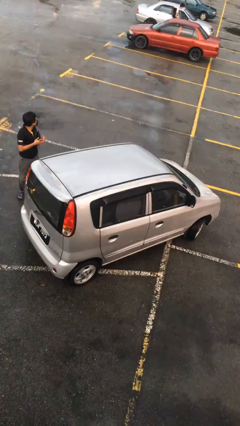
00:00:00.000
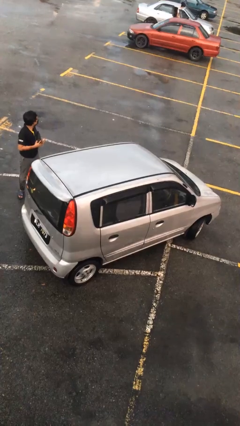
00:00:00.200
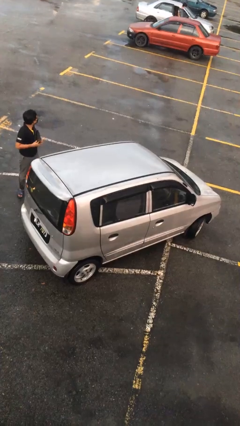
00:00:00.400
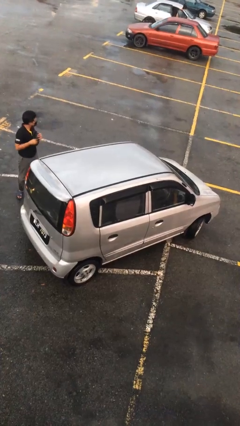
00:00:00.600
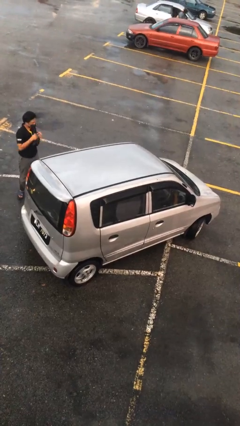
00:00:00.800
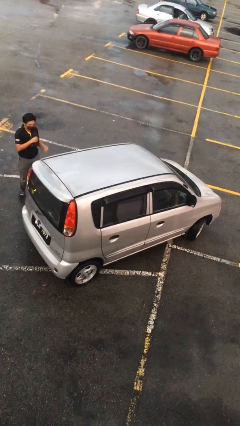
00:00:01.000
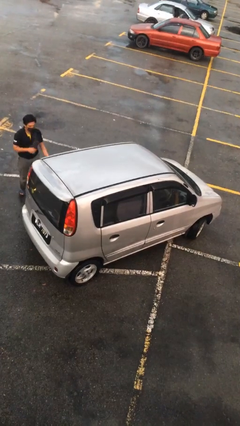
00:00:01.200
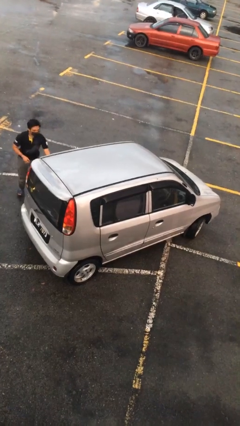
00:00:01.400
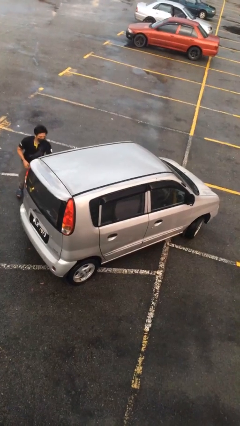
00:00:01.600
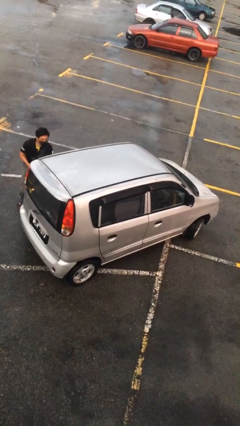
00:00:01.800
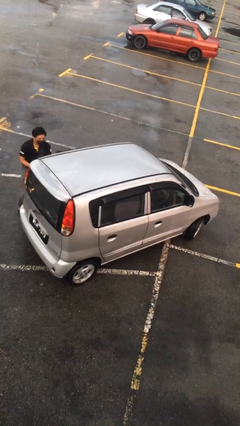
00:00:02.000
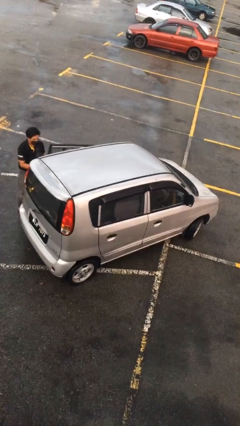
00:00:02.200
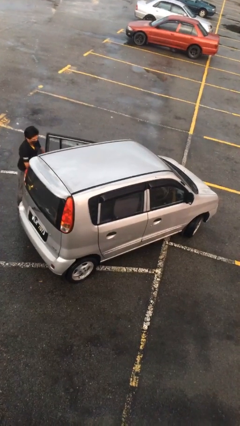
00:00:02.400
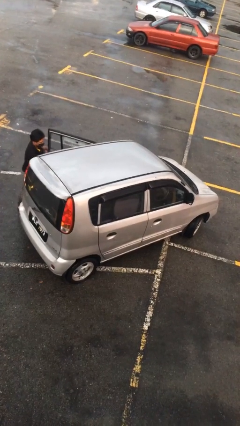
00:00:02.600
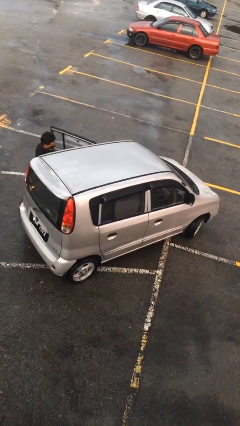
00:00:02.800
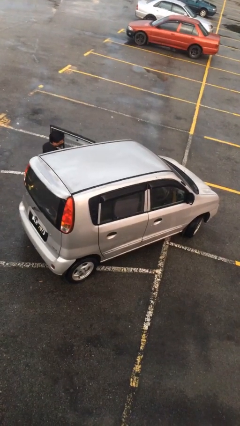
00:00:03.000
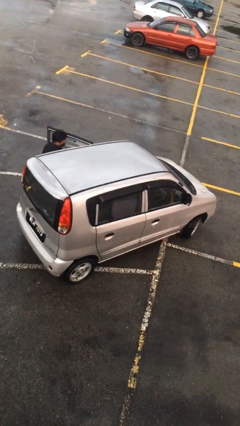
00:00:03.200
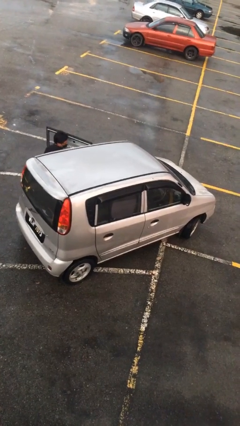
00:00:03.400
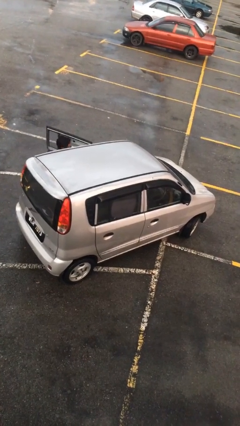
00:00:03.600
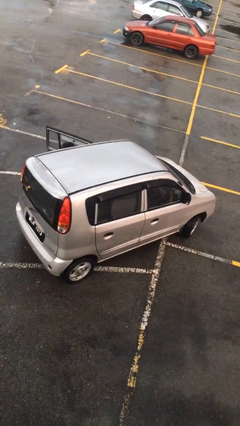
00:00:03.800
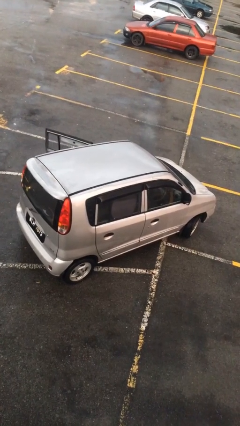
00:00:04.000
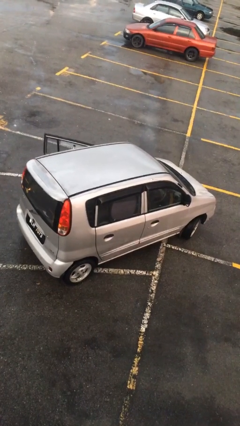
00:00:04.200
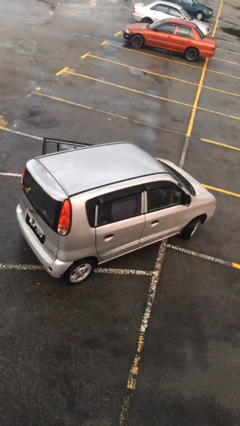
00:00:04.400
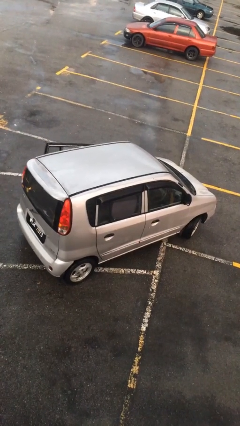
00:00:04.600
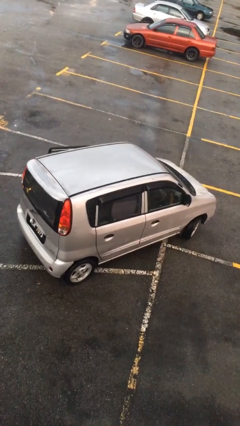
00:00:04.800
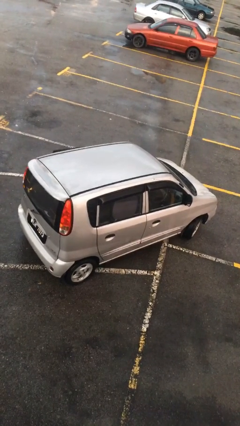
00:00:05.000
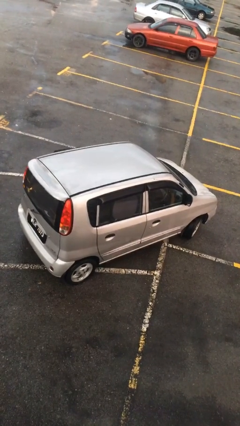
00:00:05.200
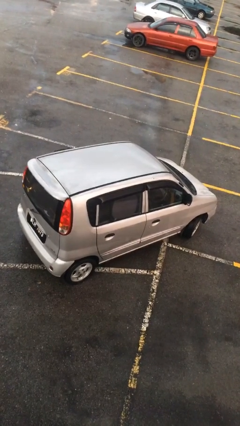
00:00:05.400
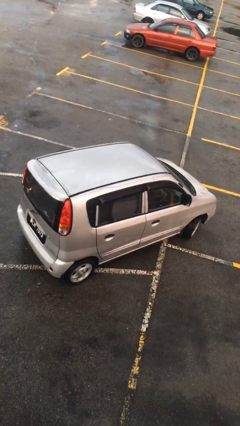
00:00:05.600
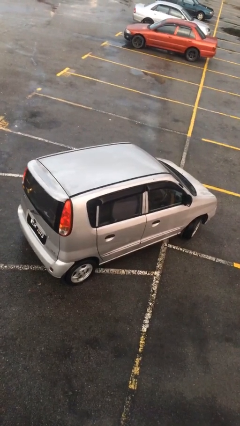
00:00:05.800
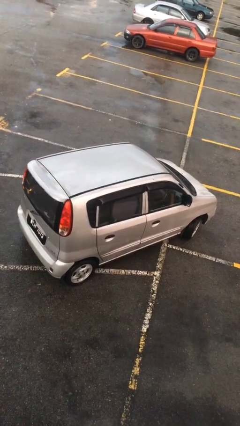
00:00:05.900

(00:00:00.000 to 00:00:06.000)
car picks up person

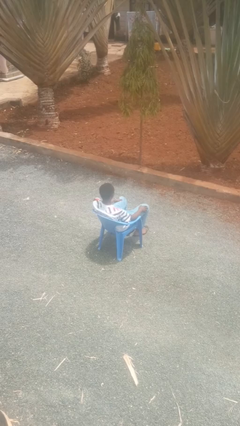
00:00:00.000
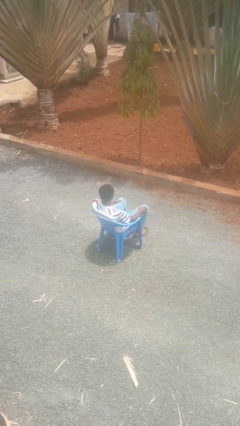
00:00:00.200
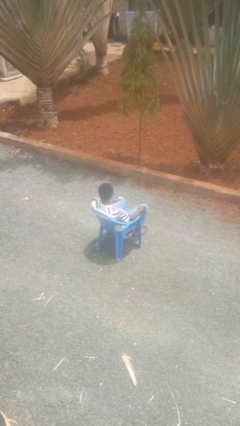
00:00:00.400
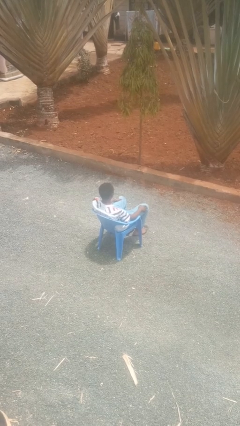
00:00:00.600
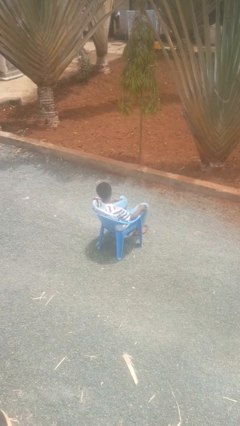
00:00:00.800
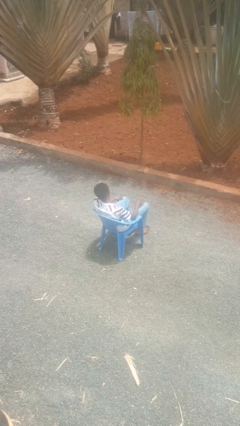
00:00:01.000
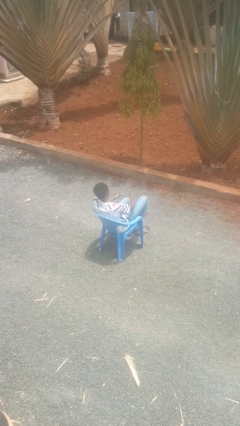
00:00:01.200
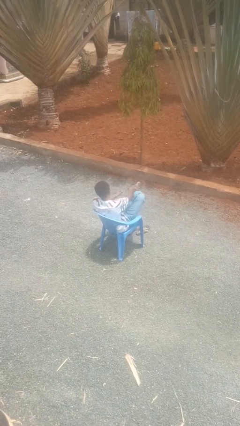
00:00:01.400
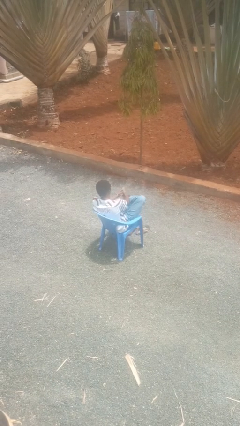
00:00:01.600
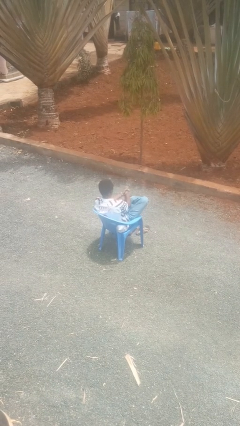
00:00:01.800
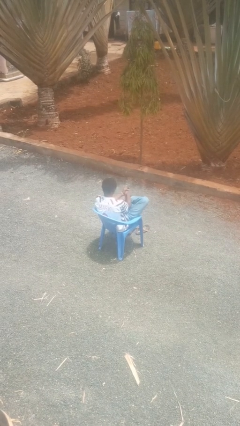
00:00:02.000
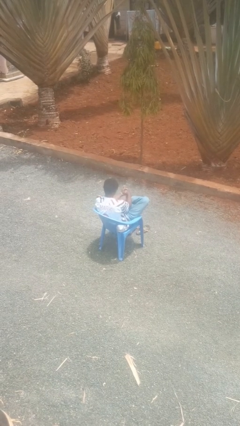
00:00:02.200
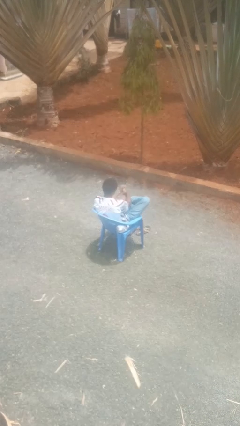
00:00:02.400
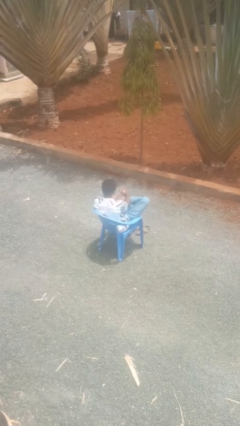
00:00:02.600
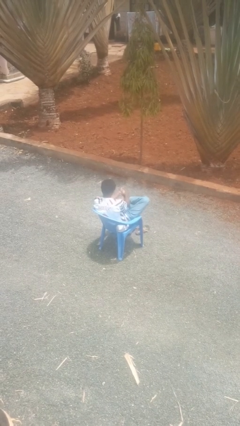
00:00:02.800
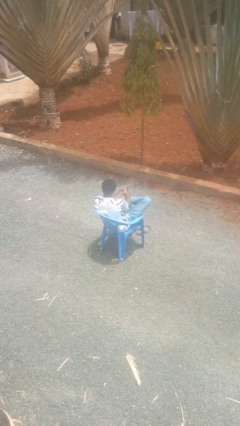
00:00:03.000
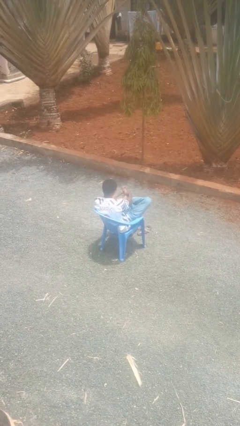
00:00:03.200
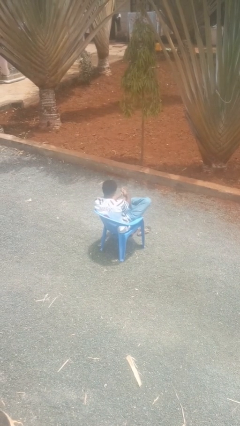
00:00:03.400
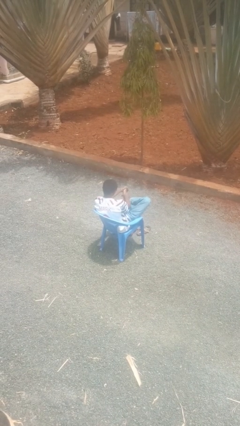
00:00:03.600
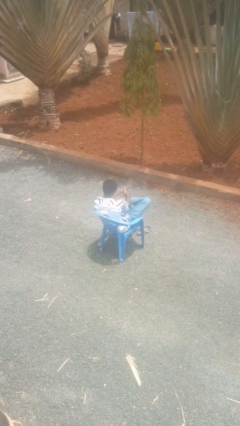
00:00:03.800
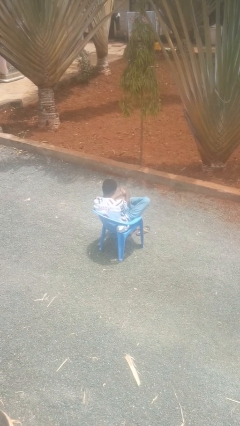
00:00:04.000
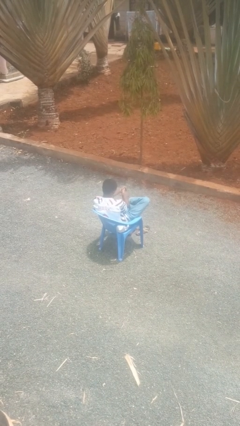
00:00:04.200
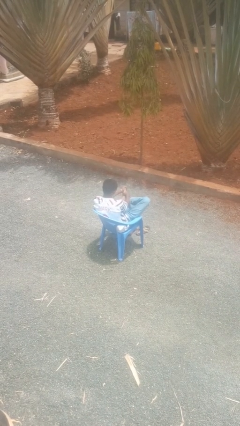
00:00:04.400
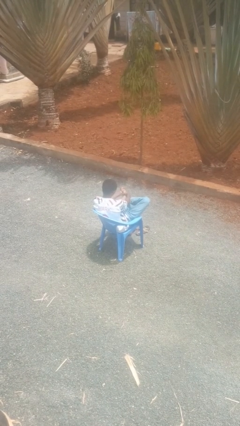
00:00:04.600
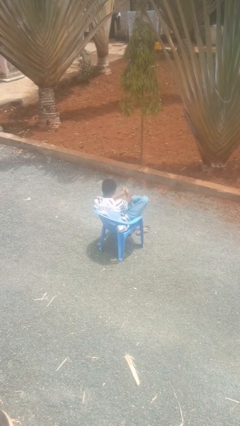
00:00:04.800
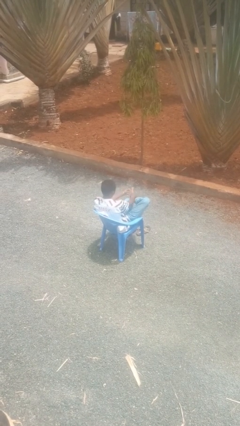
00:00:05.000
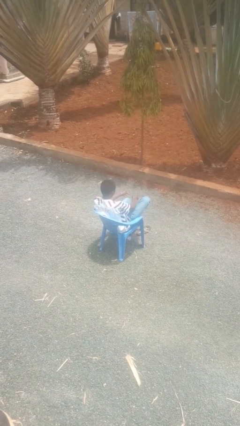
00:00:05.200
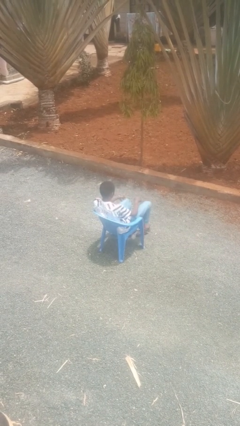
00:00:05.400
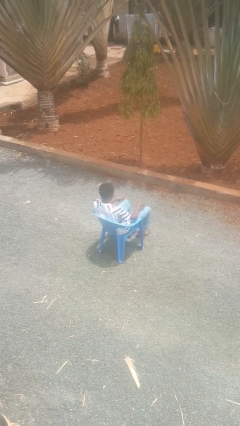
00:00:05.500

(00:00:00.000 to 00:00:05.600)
person rubs foot
